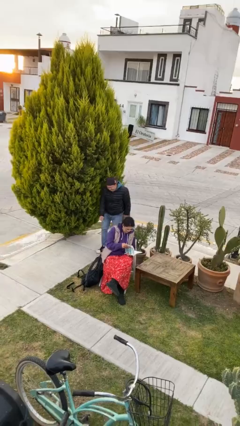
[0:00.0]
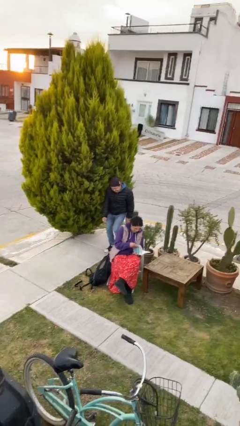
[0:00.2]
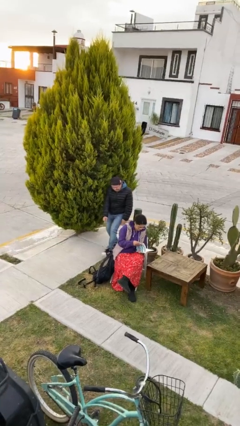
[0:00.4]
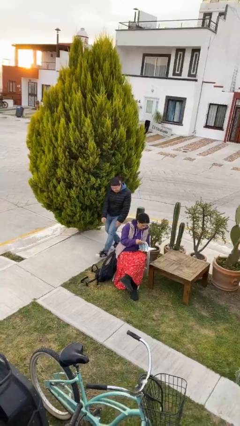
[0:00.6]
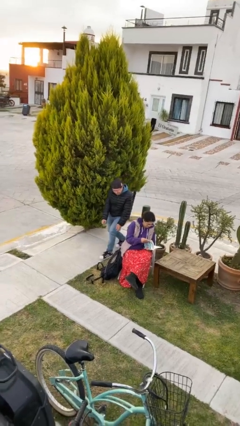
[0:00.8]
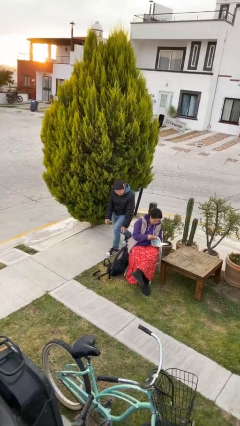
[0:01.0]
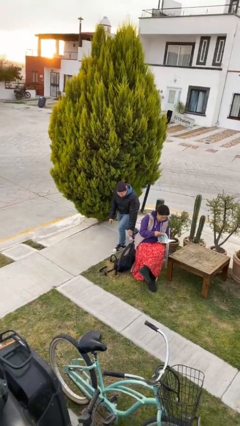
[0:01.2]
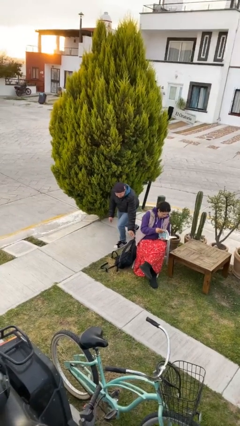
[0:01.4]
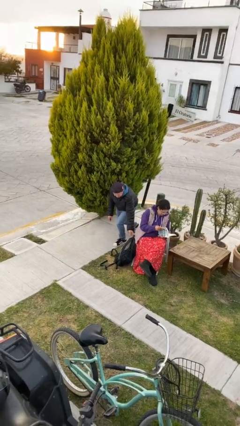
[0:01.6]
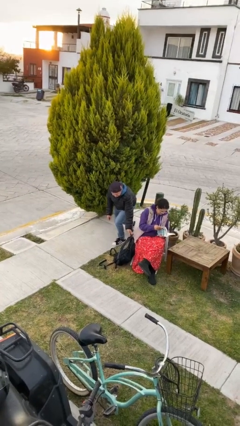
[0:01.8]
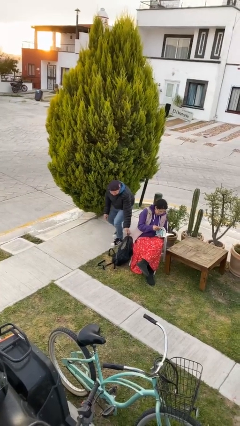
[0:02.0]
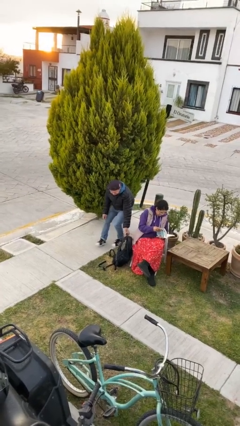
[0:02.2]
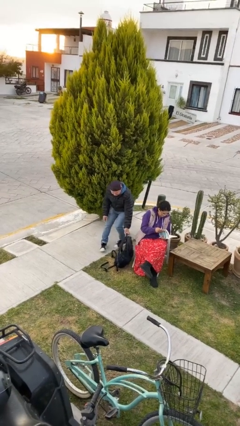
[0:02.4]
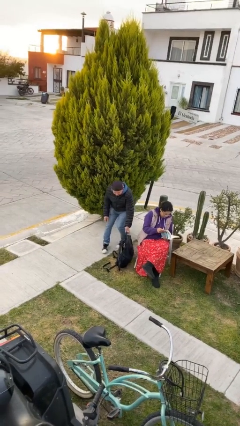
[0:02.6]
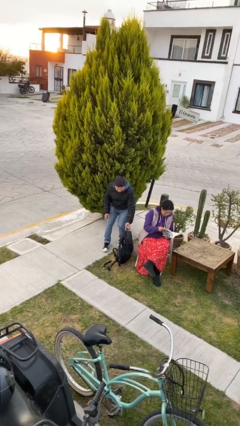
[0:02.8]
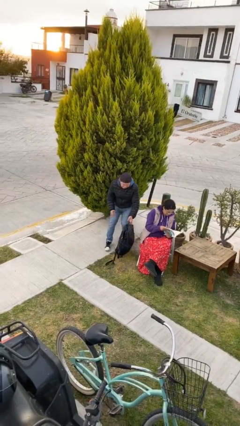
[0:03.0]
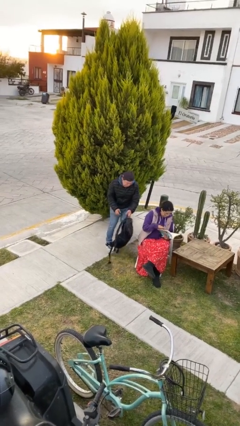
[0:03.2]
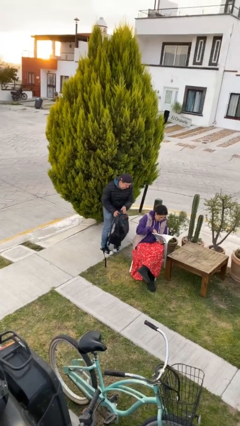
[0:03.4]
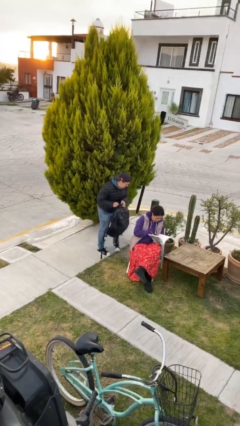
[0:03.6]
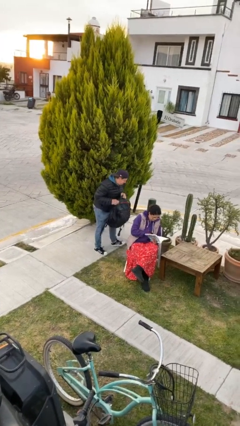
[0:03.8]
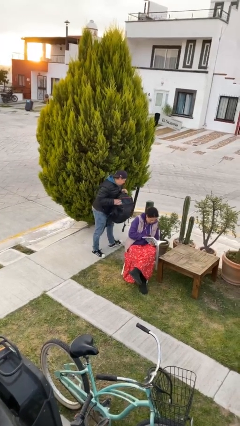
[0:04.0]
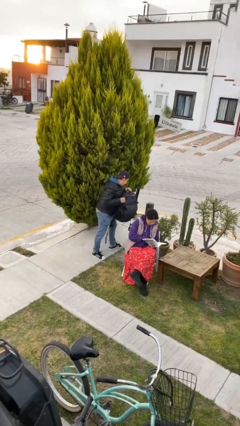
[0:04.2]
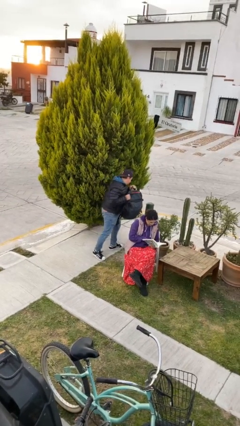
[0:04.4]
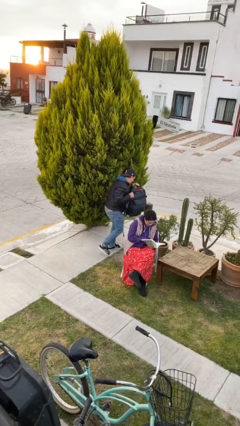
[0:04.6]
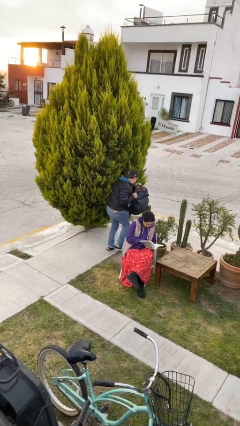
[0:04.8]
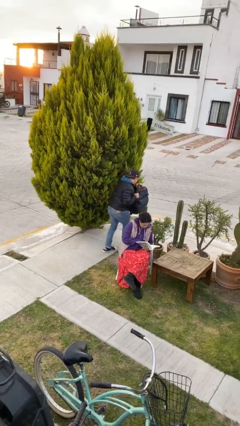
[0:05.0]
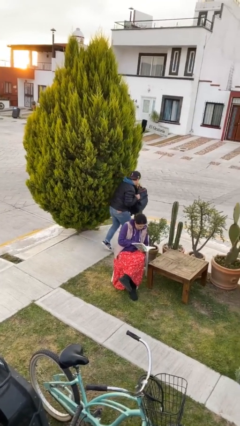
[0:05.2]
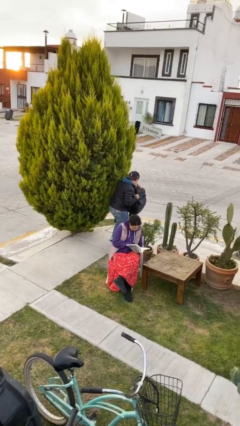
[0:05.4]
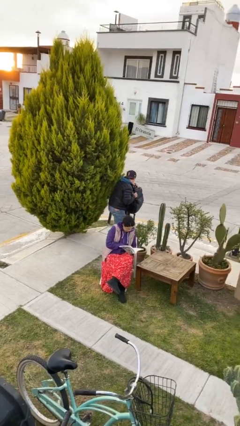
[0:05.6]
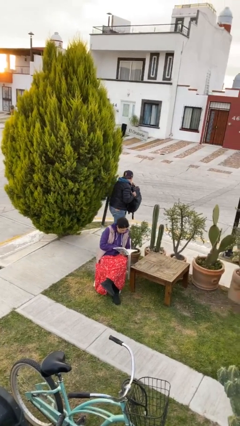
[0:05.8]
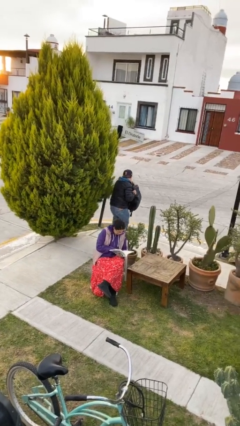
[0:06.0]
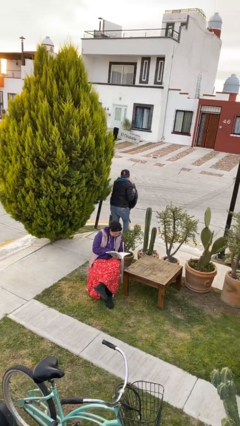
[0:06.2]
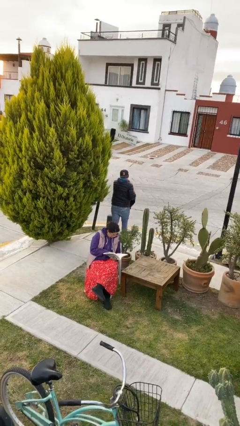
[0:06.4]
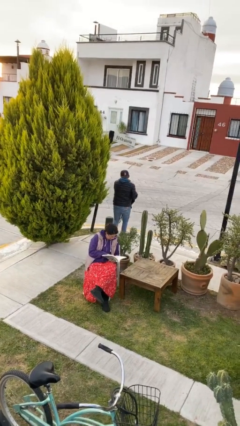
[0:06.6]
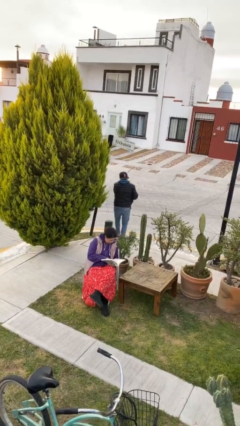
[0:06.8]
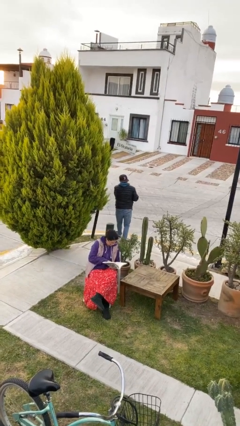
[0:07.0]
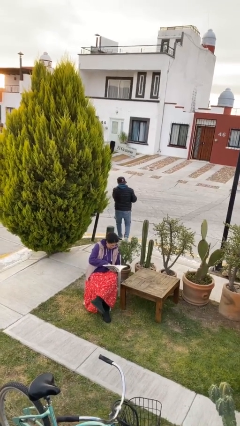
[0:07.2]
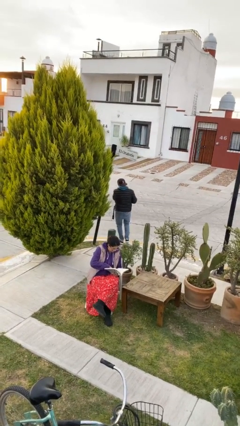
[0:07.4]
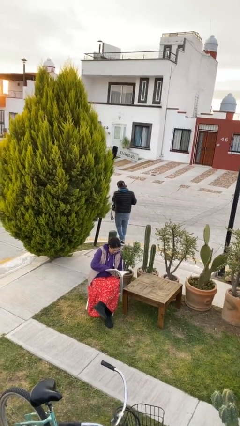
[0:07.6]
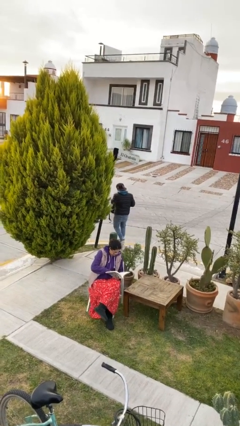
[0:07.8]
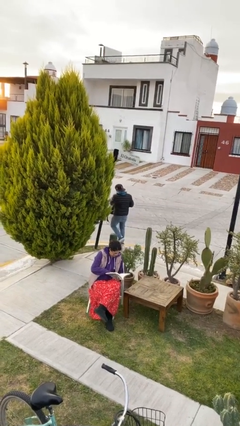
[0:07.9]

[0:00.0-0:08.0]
person steals object from person

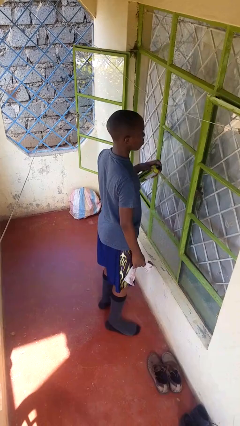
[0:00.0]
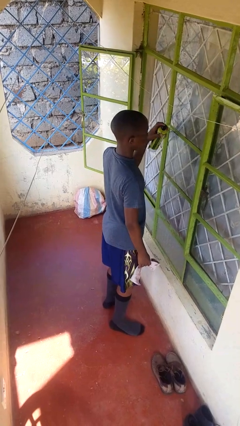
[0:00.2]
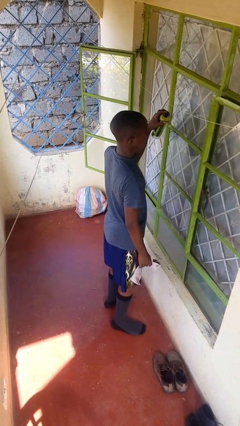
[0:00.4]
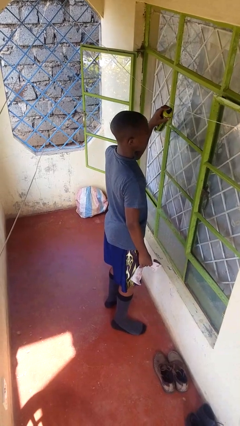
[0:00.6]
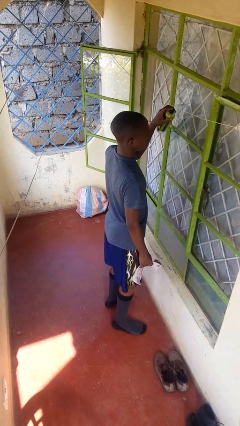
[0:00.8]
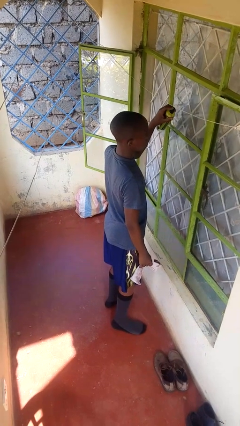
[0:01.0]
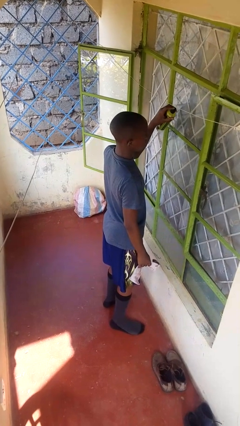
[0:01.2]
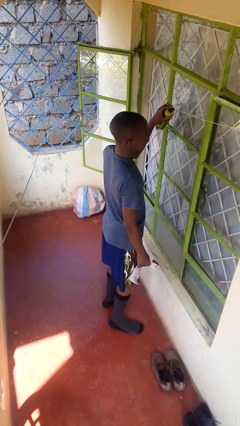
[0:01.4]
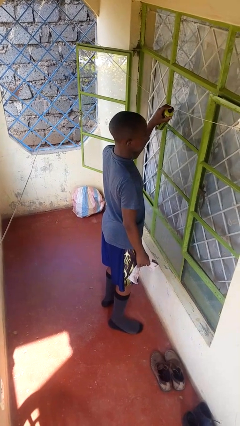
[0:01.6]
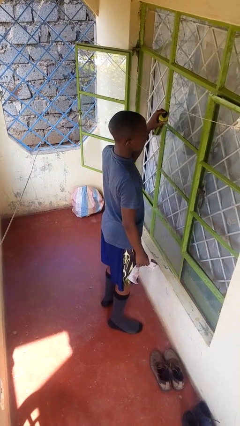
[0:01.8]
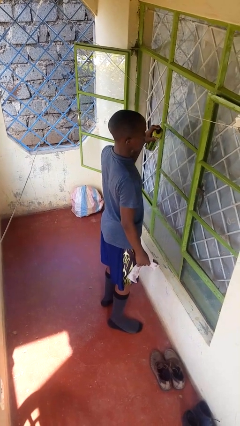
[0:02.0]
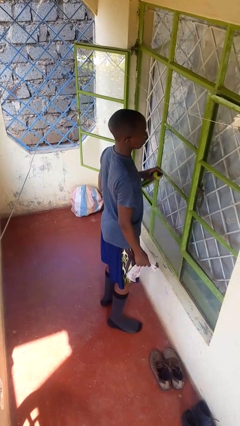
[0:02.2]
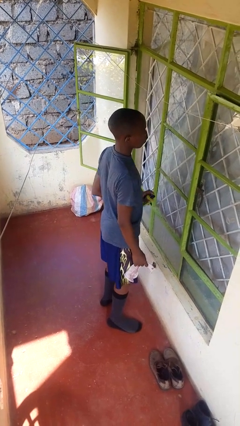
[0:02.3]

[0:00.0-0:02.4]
person sprays from bottle

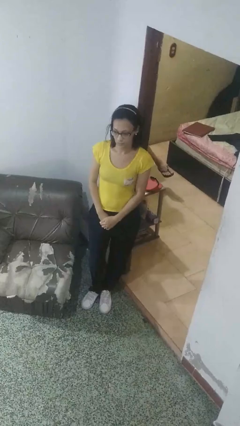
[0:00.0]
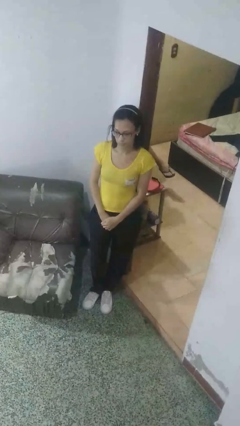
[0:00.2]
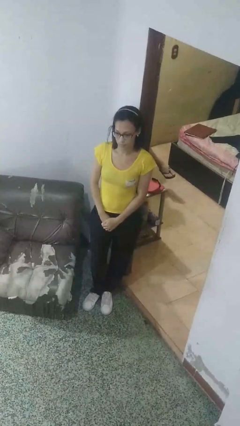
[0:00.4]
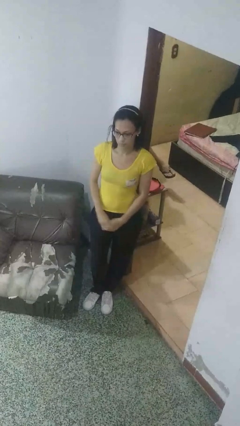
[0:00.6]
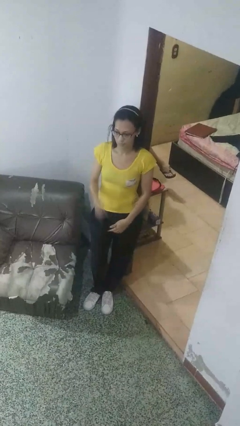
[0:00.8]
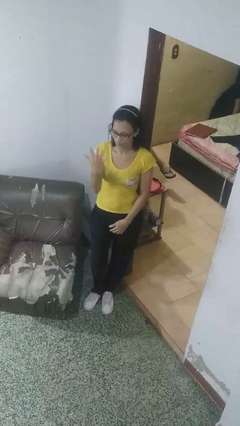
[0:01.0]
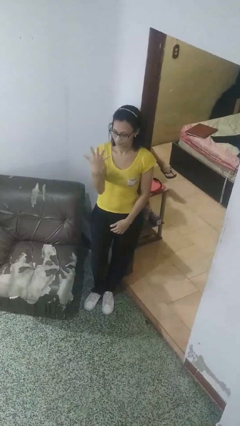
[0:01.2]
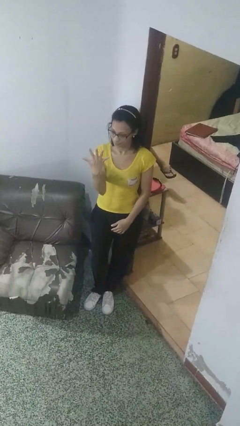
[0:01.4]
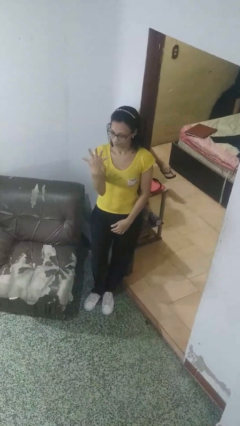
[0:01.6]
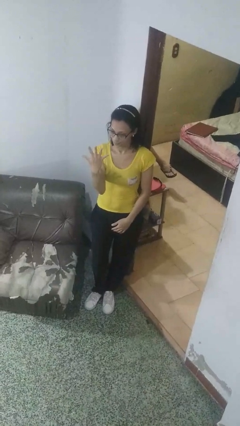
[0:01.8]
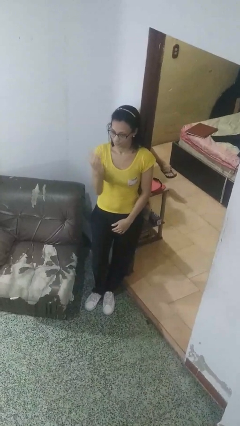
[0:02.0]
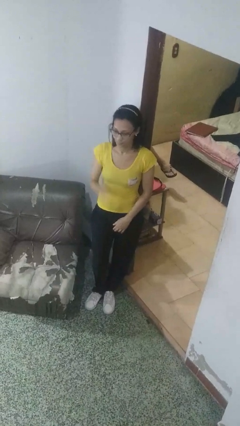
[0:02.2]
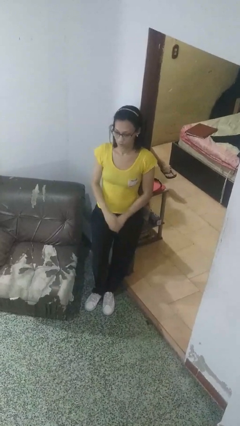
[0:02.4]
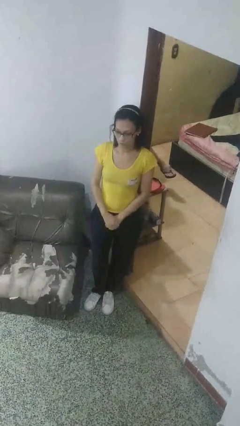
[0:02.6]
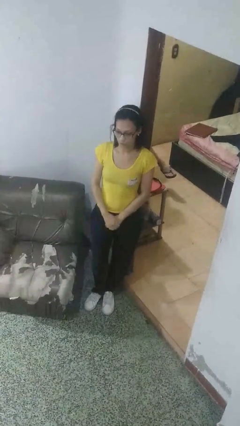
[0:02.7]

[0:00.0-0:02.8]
person gestures number five

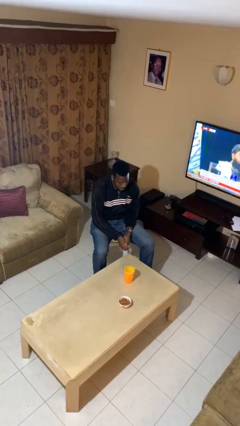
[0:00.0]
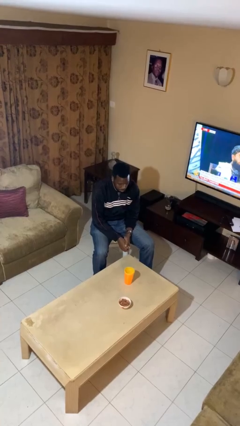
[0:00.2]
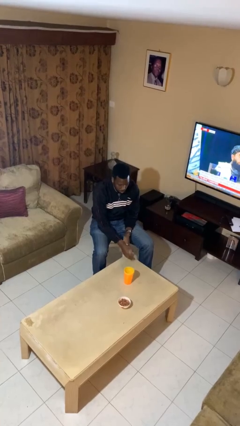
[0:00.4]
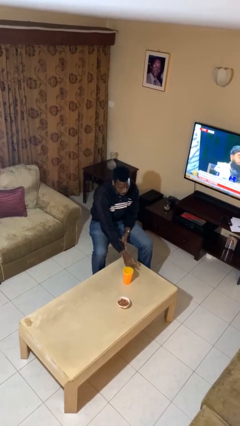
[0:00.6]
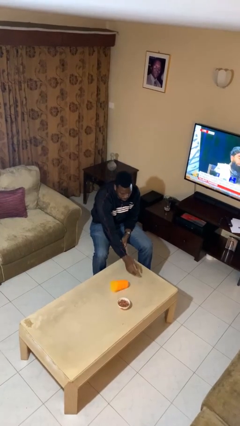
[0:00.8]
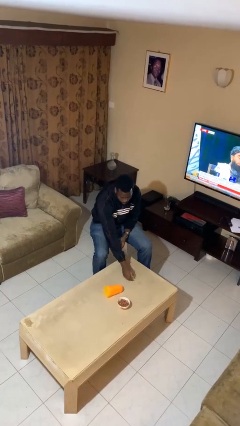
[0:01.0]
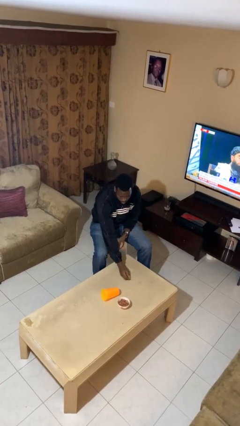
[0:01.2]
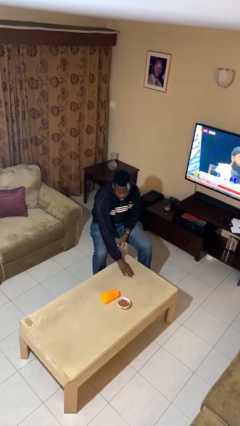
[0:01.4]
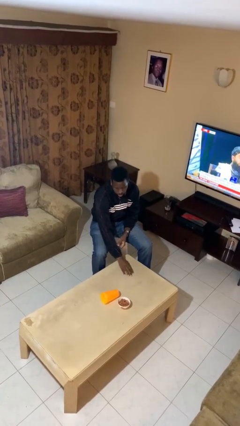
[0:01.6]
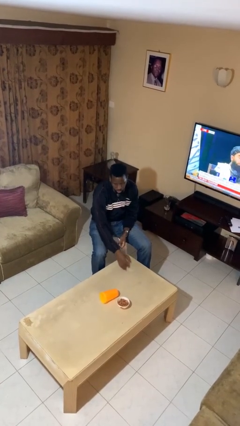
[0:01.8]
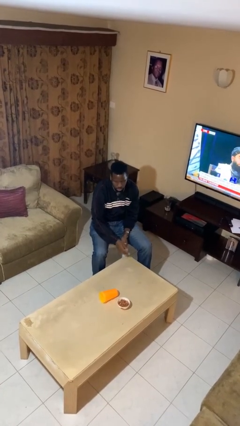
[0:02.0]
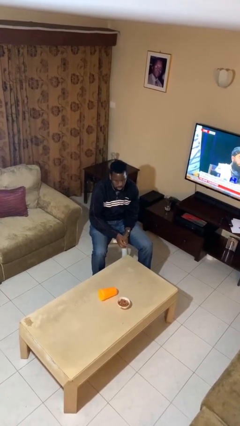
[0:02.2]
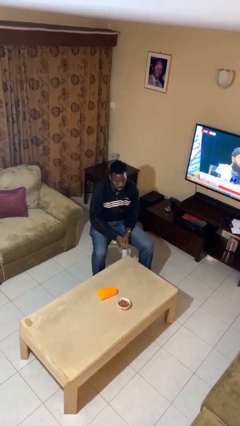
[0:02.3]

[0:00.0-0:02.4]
person knocks over glass

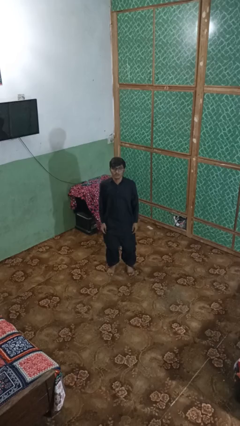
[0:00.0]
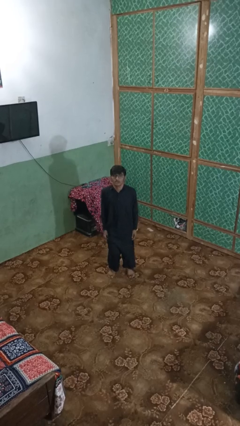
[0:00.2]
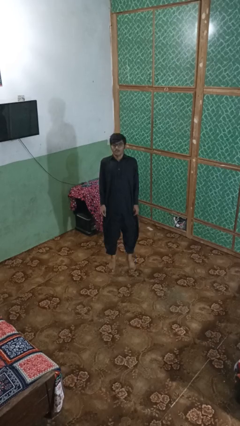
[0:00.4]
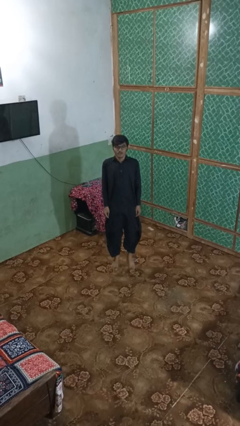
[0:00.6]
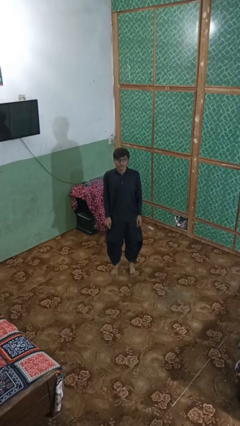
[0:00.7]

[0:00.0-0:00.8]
person jumps

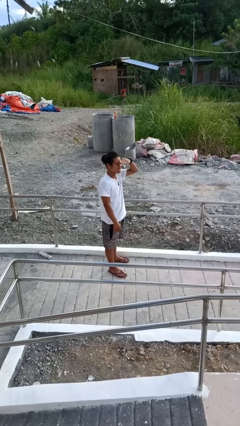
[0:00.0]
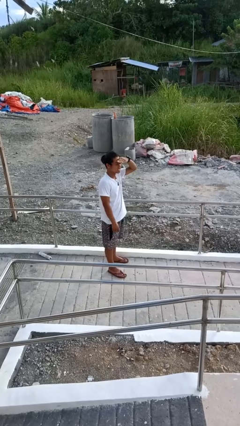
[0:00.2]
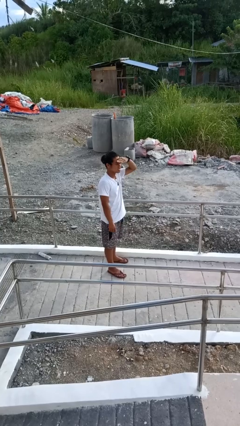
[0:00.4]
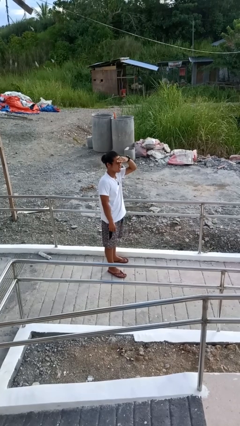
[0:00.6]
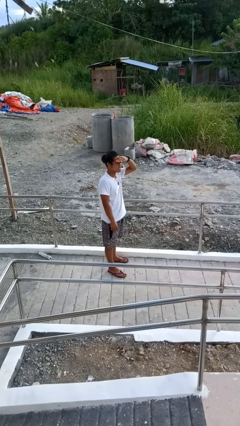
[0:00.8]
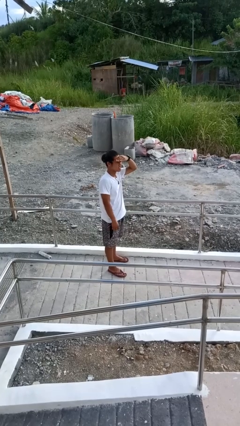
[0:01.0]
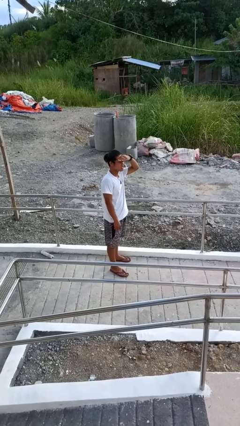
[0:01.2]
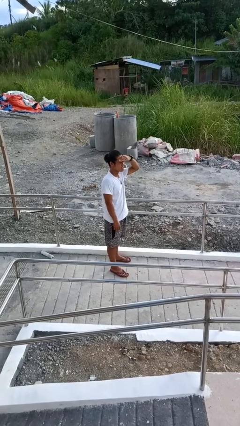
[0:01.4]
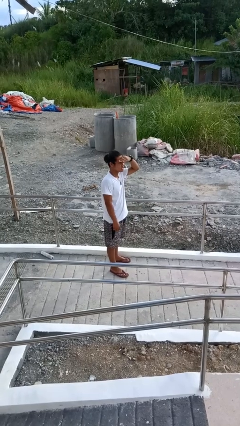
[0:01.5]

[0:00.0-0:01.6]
person shades eyes
